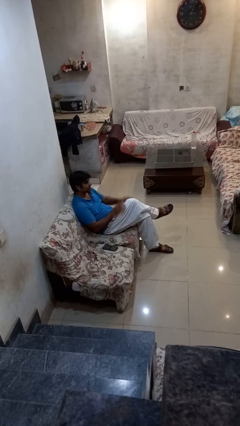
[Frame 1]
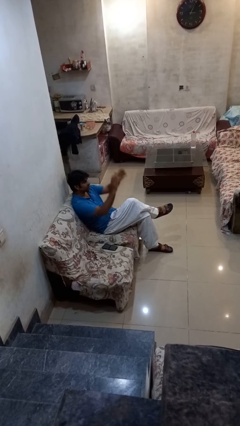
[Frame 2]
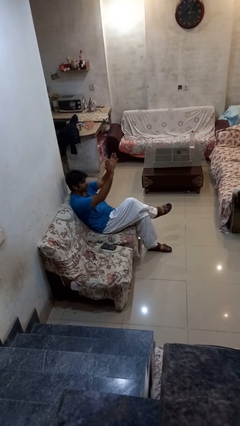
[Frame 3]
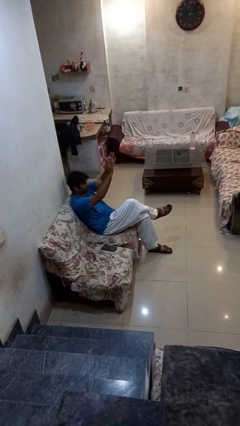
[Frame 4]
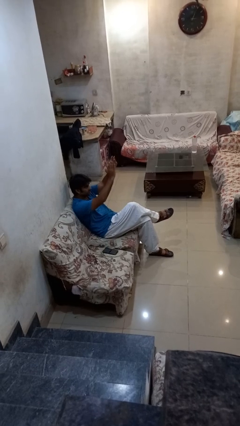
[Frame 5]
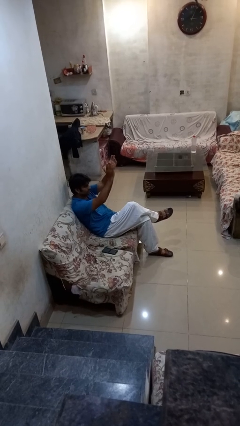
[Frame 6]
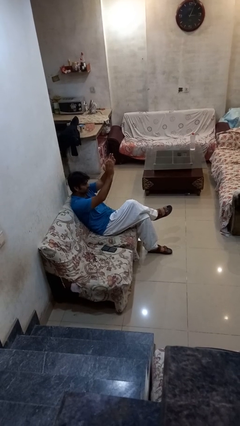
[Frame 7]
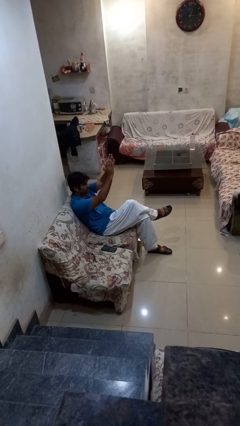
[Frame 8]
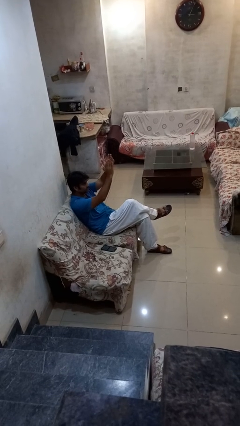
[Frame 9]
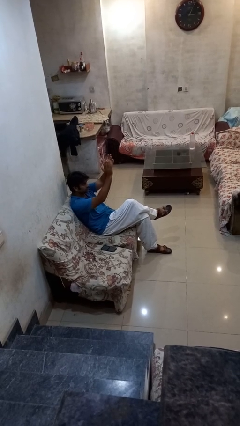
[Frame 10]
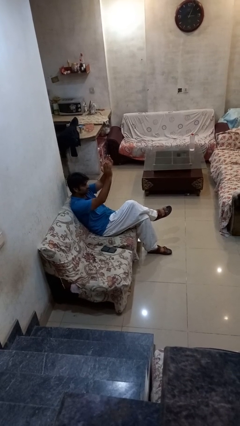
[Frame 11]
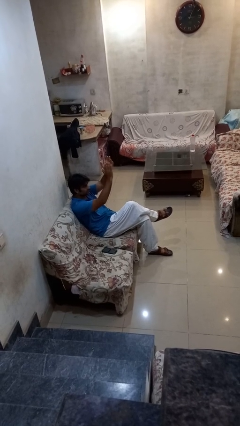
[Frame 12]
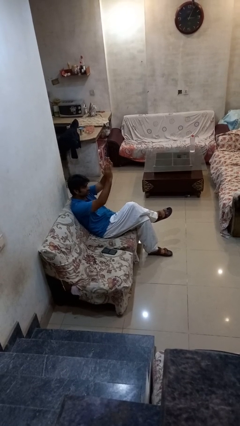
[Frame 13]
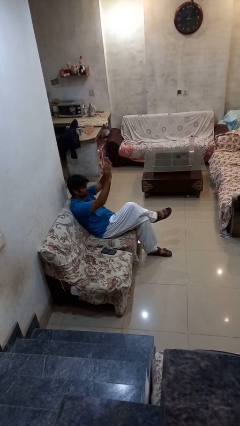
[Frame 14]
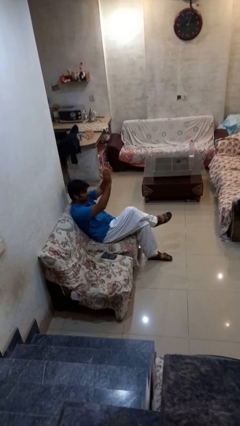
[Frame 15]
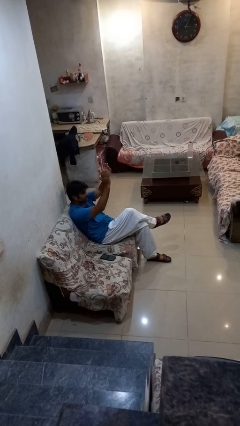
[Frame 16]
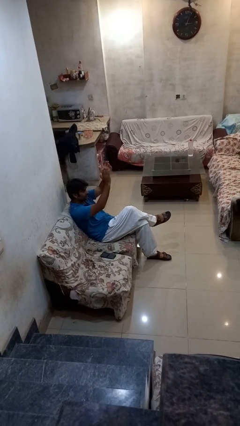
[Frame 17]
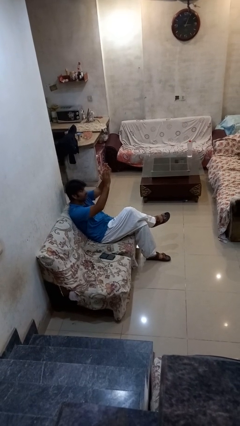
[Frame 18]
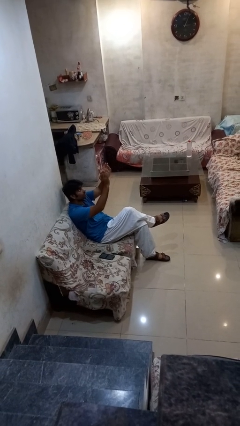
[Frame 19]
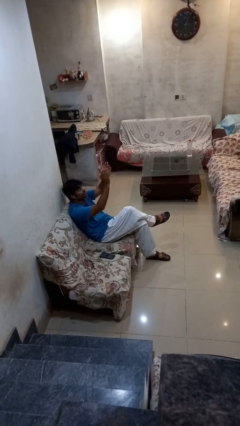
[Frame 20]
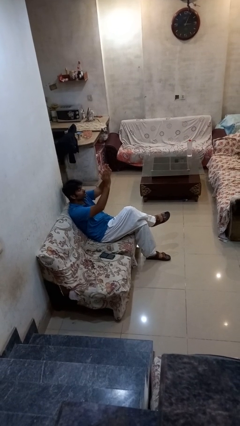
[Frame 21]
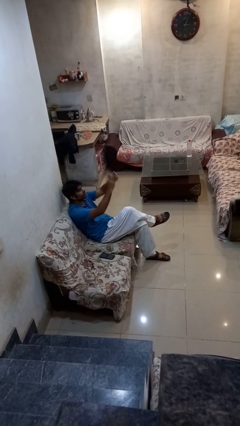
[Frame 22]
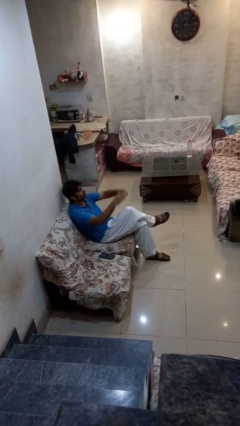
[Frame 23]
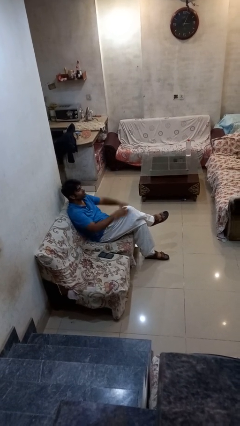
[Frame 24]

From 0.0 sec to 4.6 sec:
person claps hands

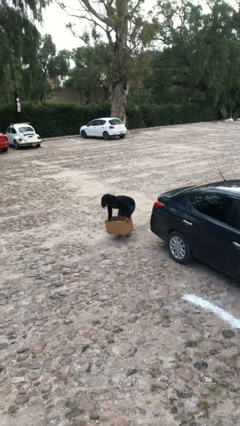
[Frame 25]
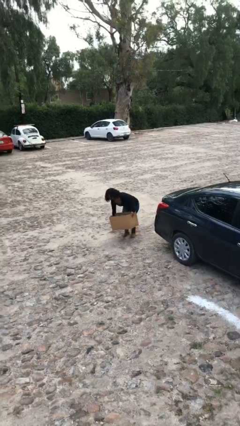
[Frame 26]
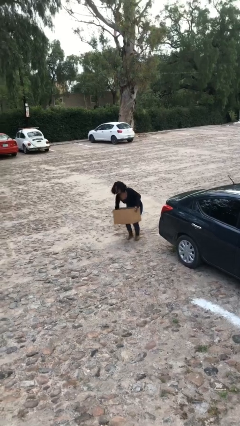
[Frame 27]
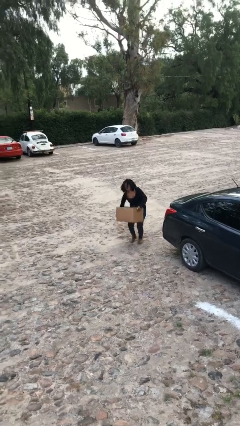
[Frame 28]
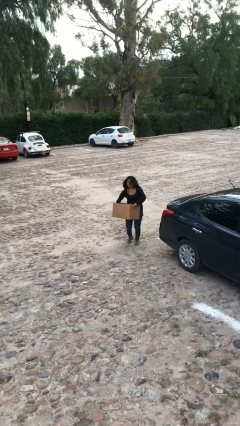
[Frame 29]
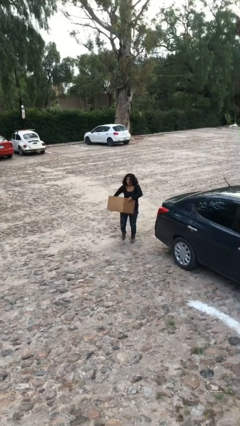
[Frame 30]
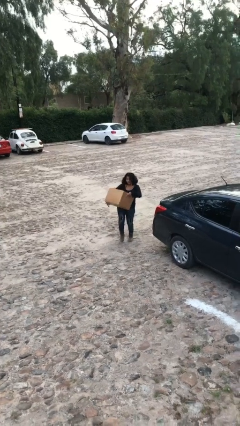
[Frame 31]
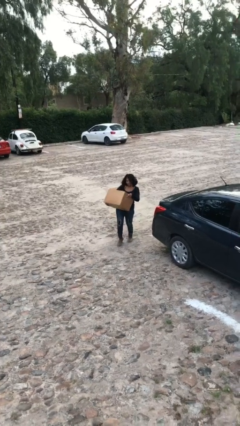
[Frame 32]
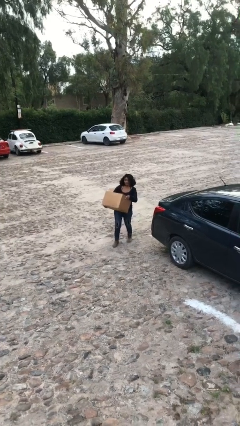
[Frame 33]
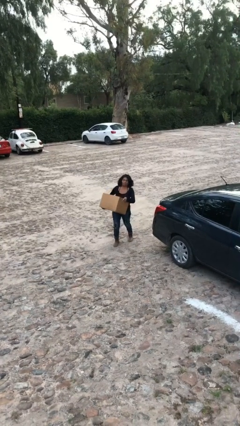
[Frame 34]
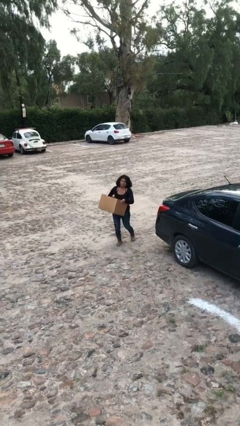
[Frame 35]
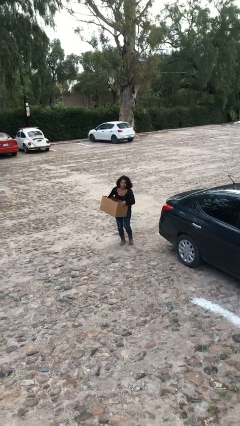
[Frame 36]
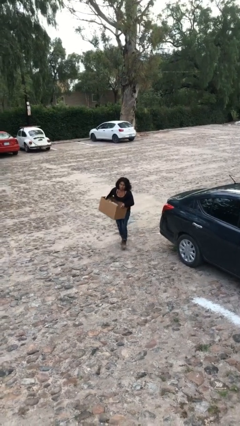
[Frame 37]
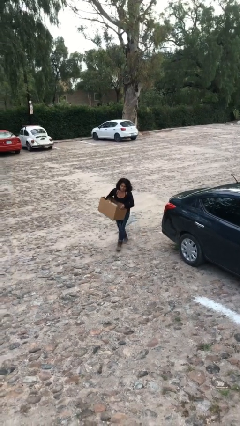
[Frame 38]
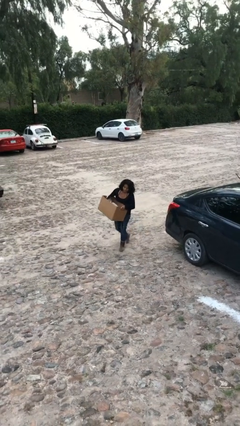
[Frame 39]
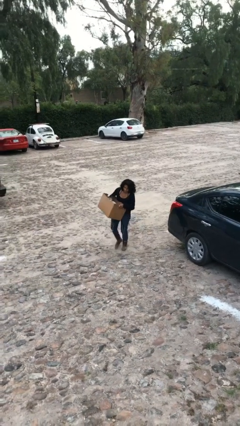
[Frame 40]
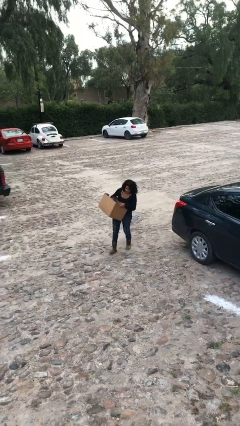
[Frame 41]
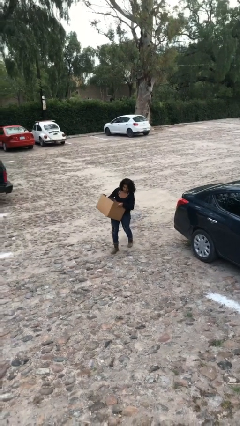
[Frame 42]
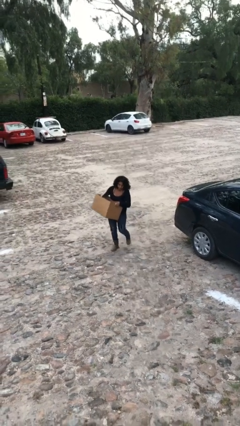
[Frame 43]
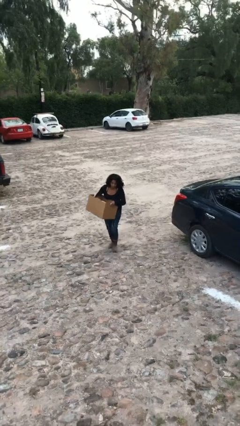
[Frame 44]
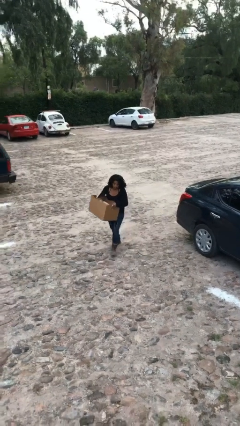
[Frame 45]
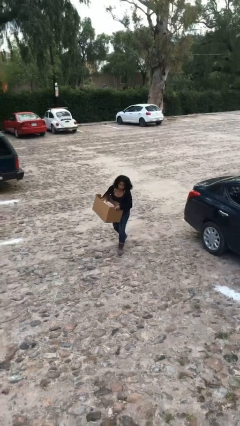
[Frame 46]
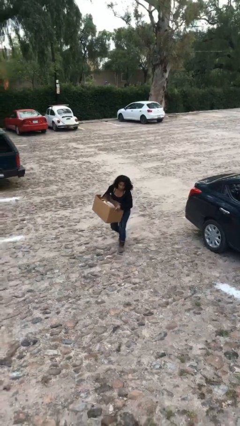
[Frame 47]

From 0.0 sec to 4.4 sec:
person carries heavy object

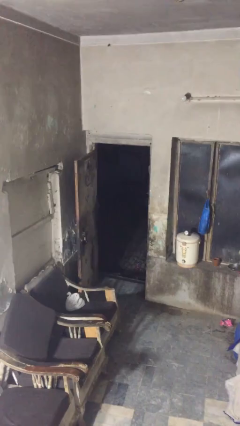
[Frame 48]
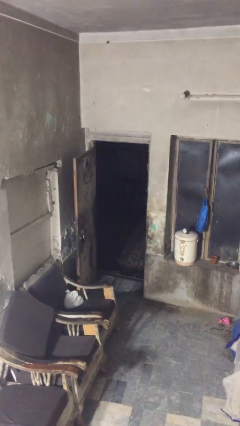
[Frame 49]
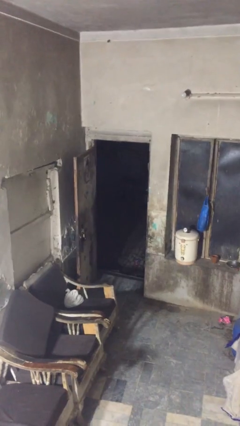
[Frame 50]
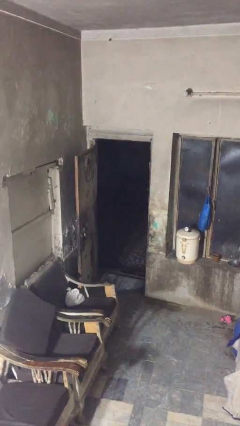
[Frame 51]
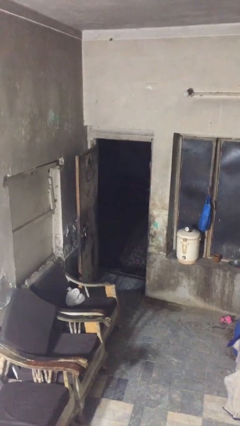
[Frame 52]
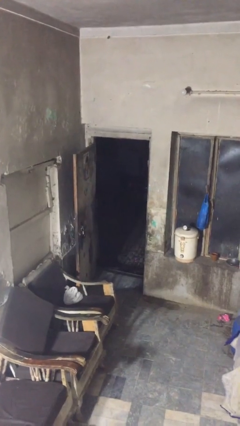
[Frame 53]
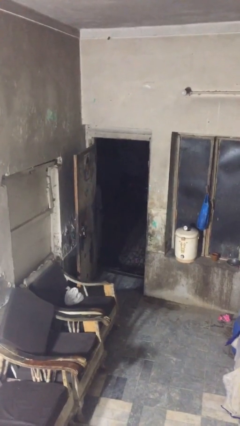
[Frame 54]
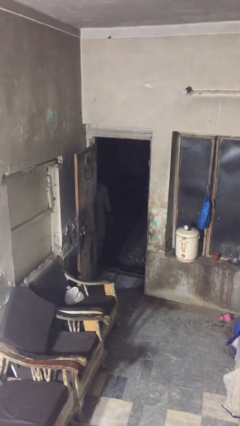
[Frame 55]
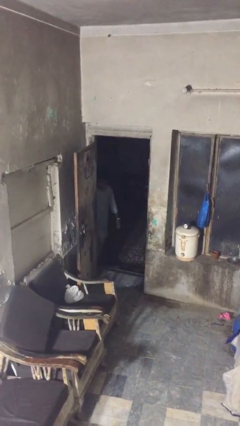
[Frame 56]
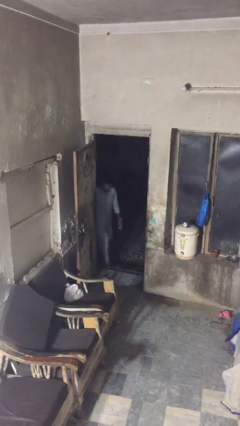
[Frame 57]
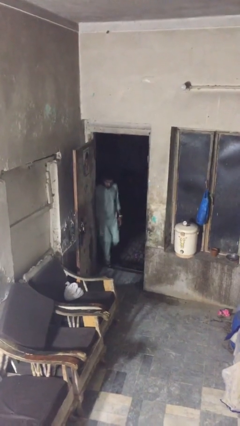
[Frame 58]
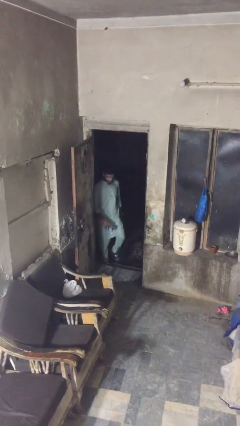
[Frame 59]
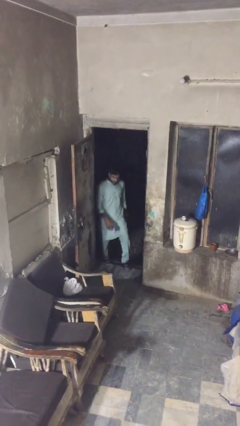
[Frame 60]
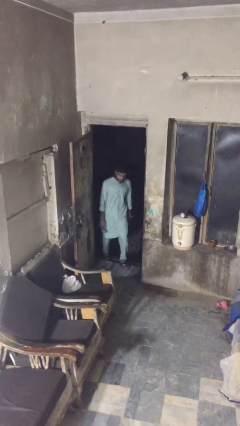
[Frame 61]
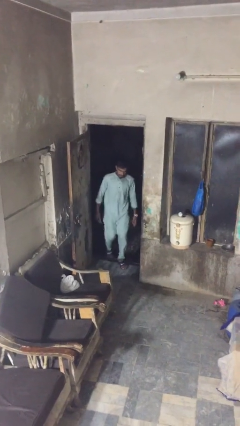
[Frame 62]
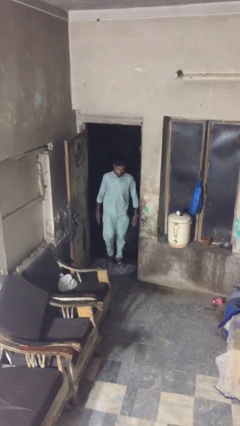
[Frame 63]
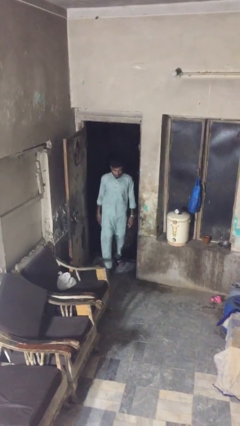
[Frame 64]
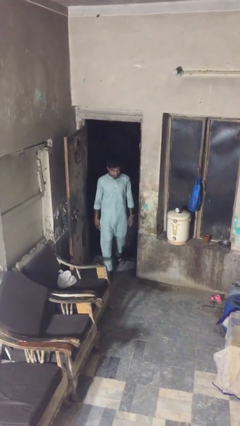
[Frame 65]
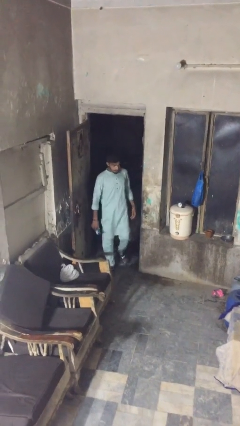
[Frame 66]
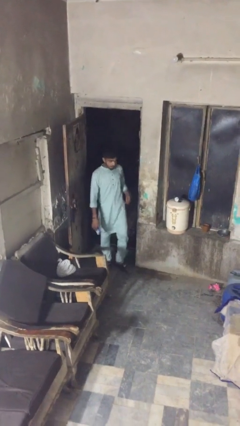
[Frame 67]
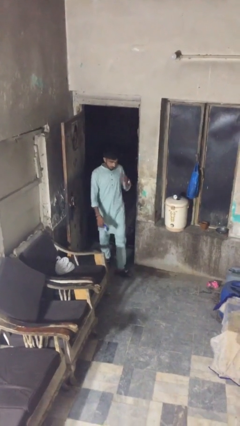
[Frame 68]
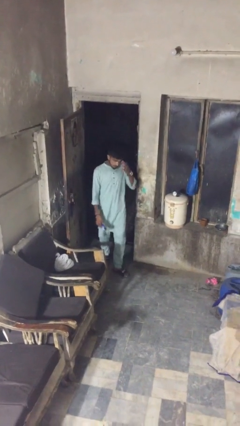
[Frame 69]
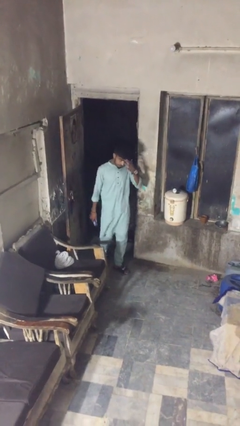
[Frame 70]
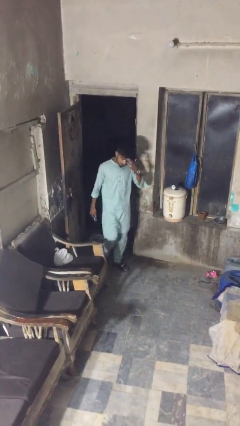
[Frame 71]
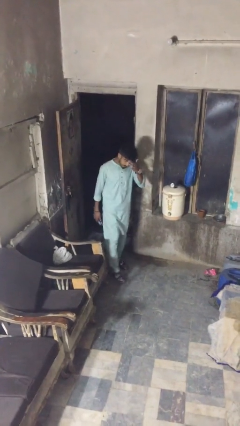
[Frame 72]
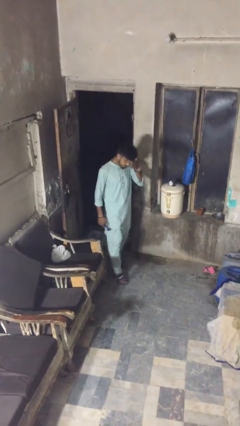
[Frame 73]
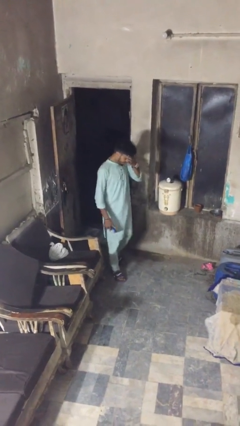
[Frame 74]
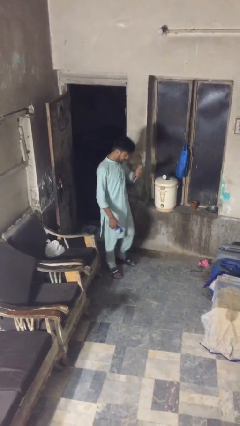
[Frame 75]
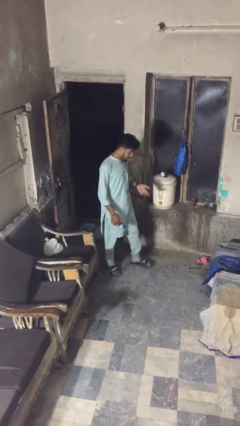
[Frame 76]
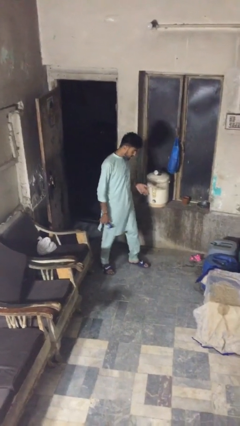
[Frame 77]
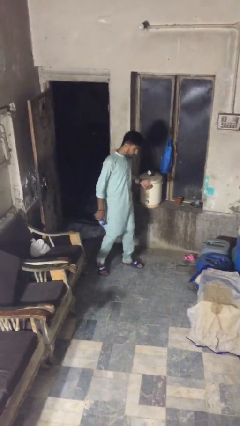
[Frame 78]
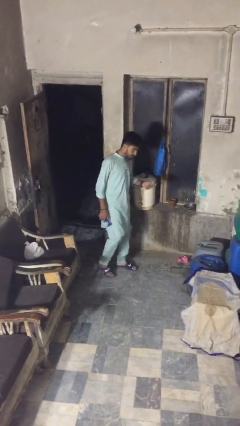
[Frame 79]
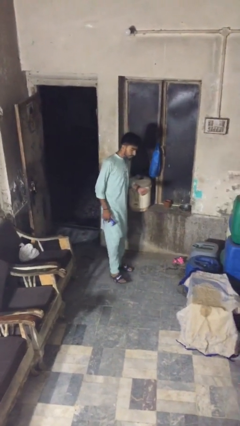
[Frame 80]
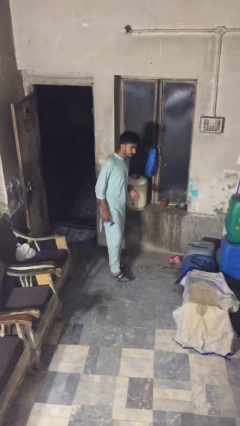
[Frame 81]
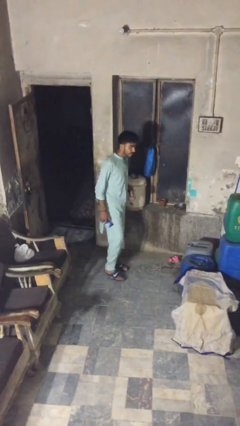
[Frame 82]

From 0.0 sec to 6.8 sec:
person enters scene through structure

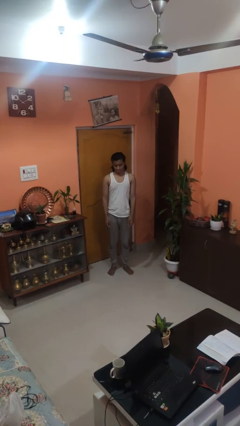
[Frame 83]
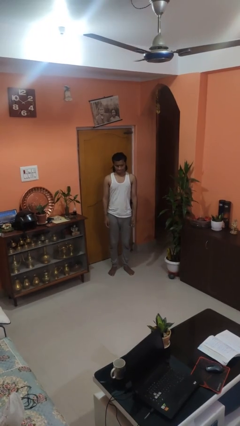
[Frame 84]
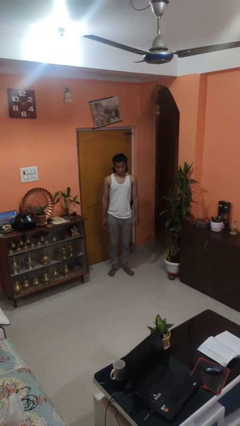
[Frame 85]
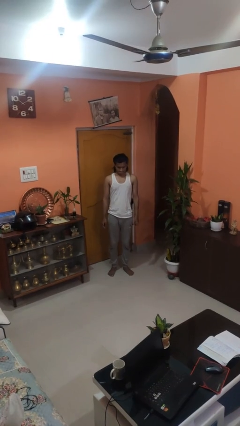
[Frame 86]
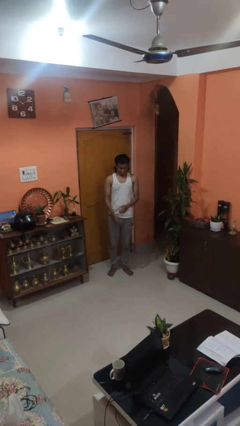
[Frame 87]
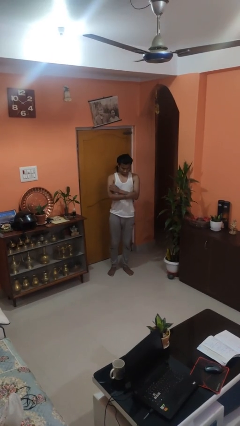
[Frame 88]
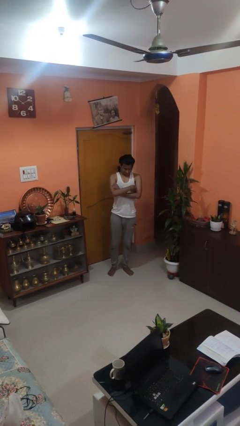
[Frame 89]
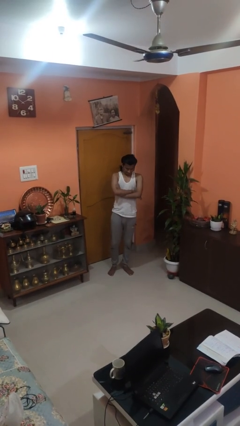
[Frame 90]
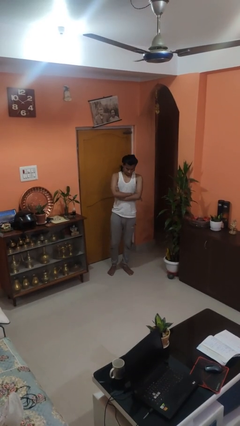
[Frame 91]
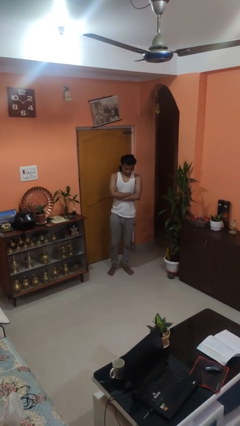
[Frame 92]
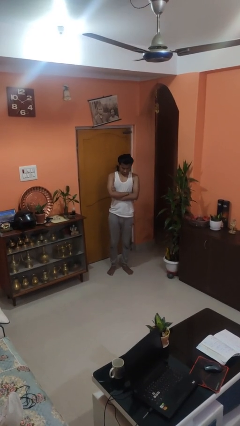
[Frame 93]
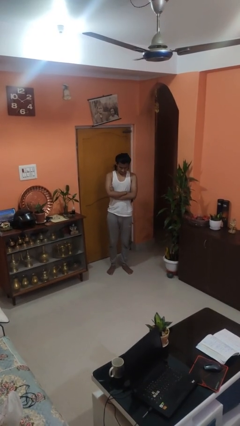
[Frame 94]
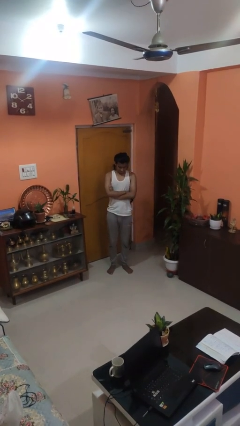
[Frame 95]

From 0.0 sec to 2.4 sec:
person crosses arms
